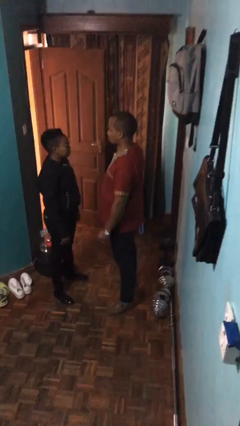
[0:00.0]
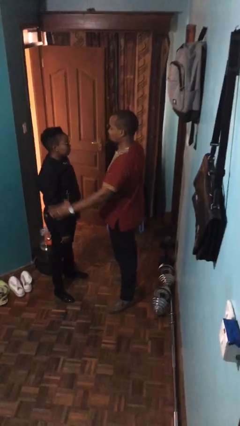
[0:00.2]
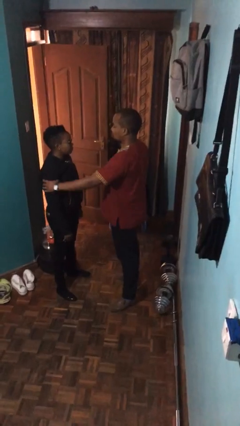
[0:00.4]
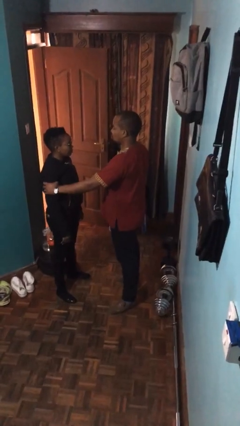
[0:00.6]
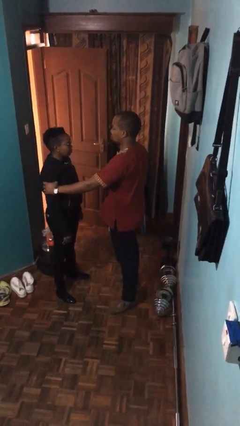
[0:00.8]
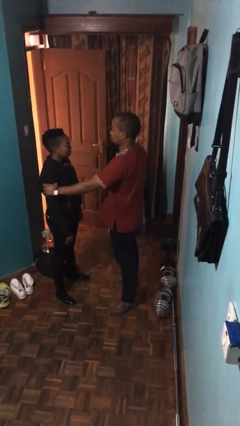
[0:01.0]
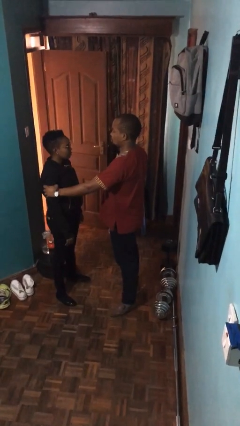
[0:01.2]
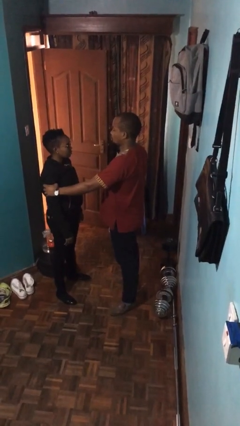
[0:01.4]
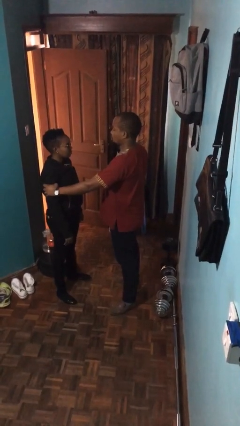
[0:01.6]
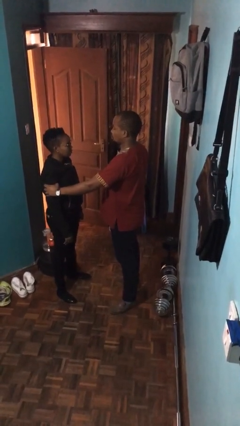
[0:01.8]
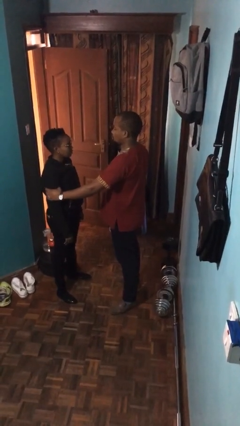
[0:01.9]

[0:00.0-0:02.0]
person grabs person by bicep

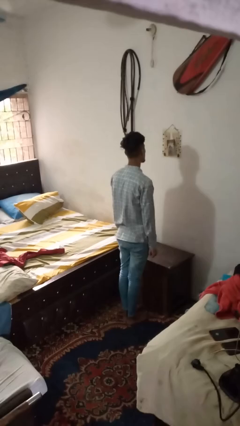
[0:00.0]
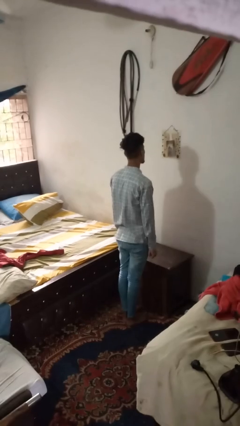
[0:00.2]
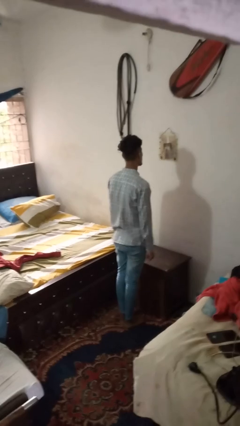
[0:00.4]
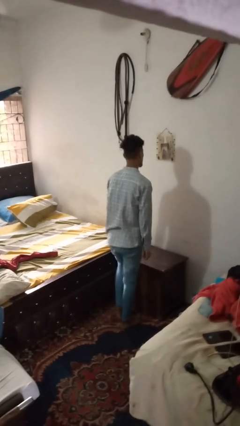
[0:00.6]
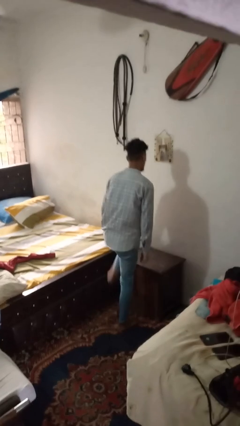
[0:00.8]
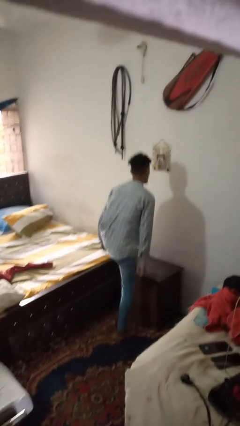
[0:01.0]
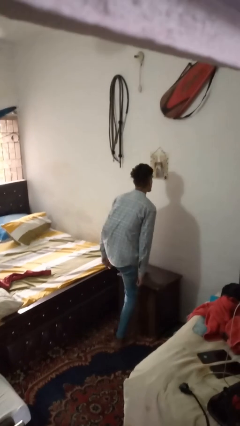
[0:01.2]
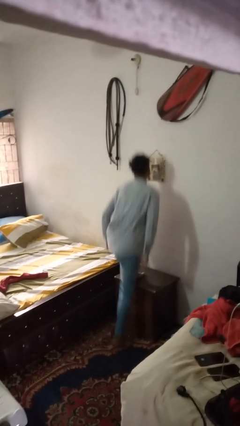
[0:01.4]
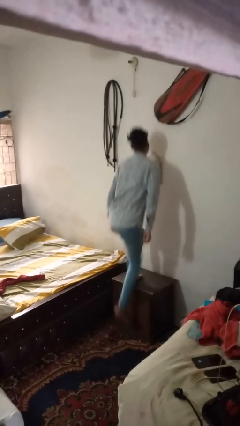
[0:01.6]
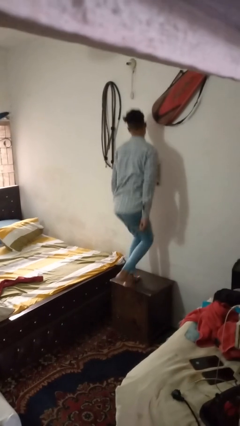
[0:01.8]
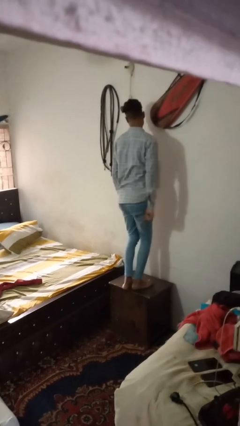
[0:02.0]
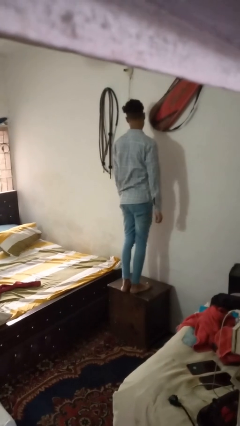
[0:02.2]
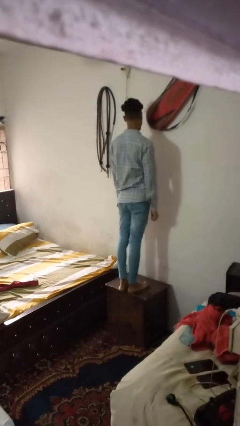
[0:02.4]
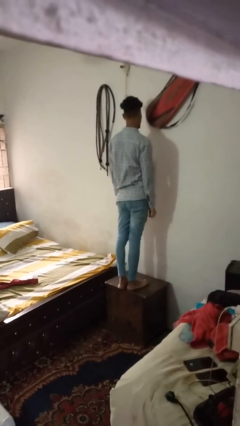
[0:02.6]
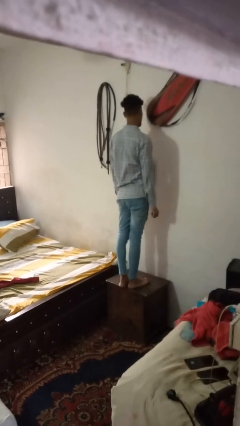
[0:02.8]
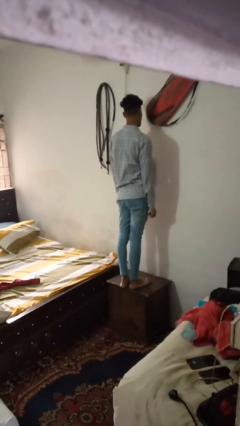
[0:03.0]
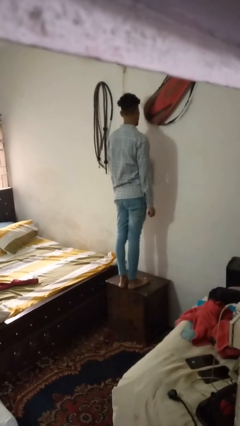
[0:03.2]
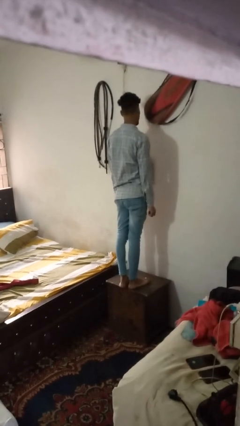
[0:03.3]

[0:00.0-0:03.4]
person climbs on table

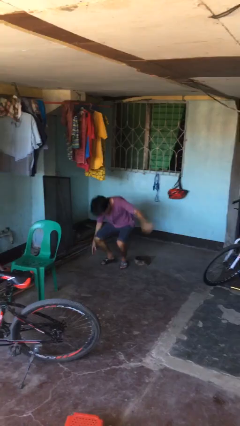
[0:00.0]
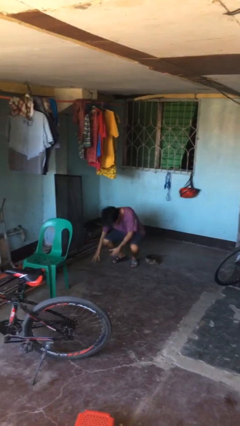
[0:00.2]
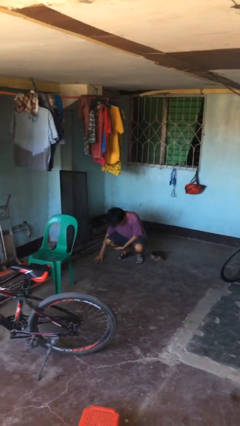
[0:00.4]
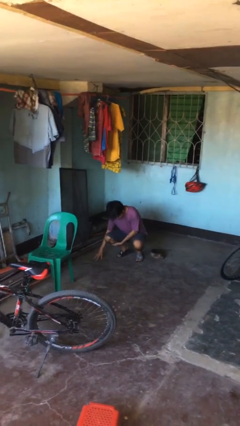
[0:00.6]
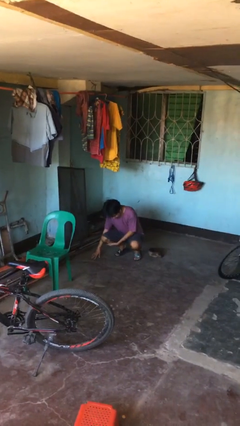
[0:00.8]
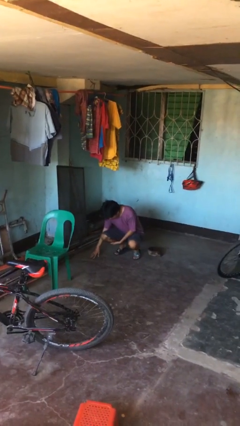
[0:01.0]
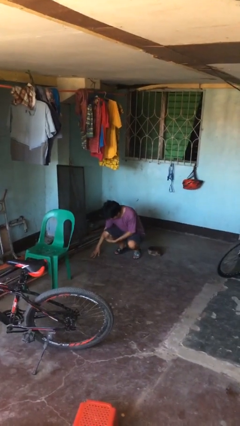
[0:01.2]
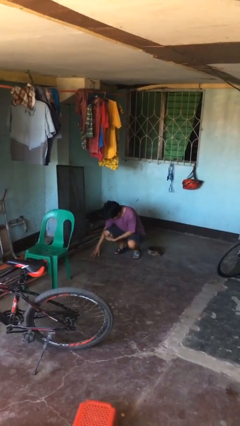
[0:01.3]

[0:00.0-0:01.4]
person lies down on floor

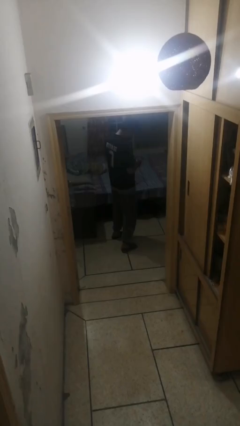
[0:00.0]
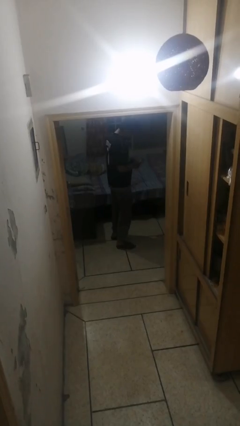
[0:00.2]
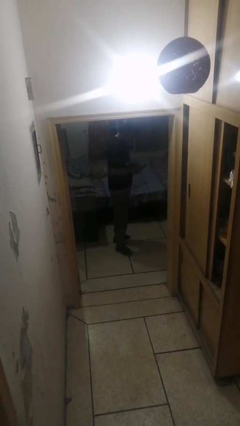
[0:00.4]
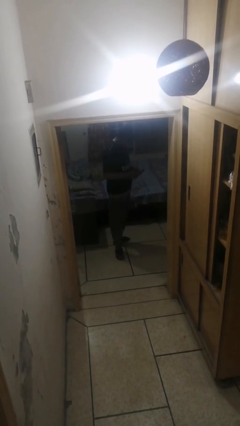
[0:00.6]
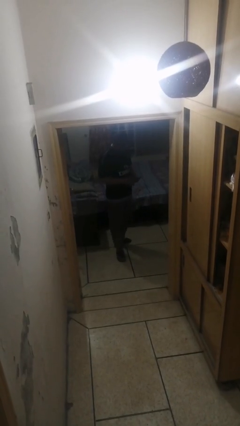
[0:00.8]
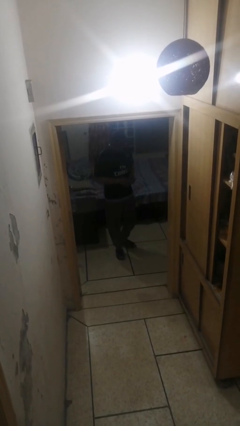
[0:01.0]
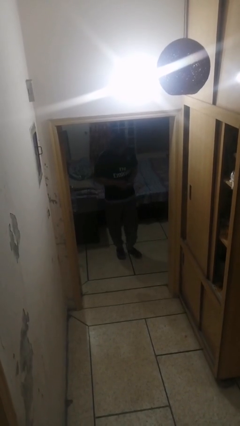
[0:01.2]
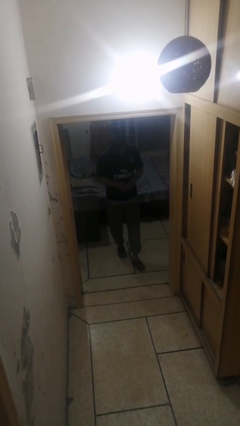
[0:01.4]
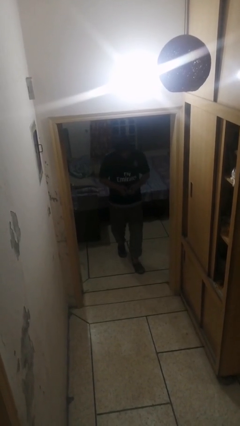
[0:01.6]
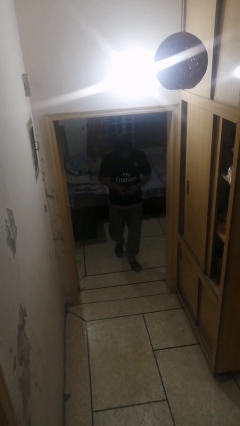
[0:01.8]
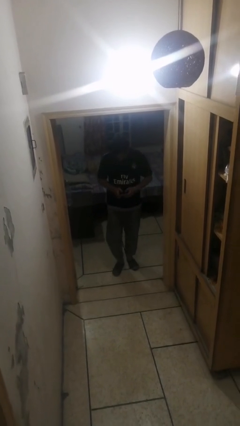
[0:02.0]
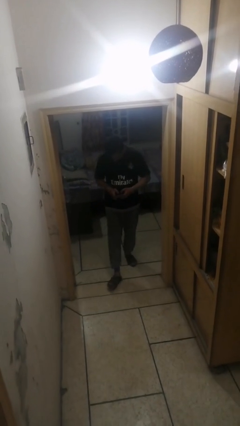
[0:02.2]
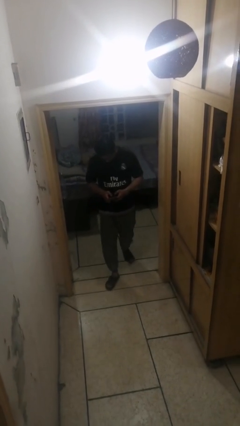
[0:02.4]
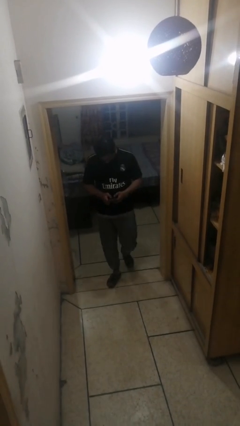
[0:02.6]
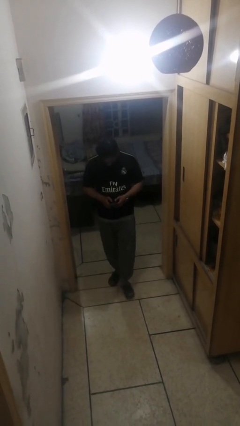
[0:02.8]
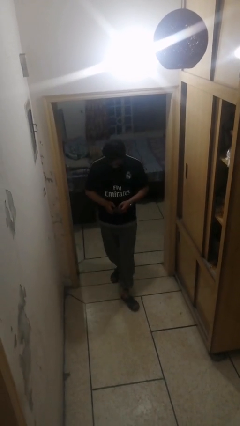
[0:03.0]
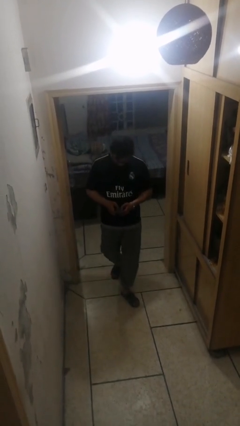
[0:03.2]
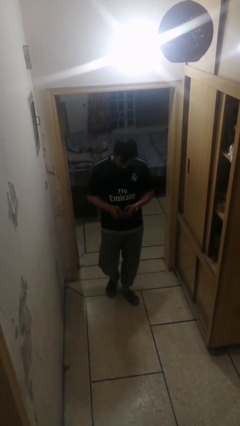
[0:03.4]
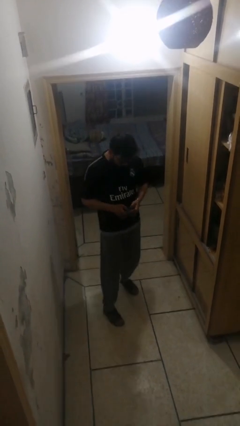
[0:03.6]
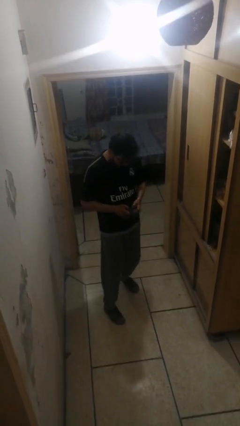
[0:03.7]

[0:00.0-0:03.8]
person enters scene through structure

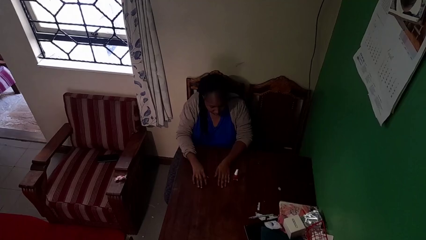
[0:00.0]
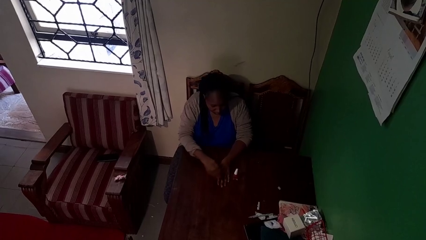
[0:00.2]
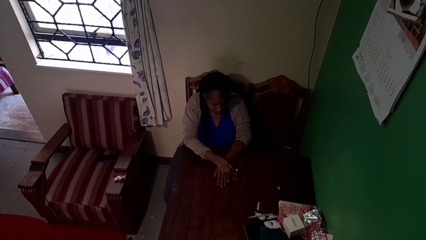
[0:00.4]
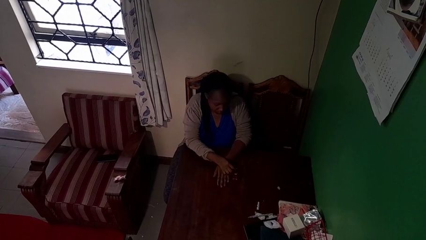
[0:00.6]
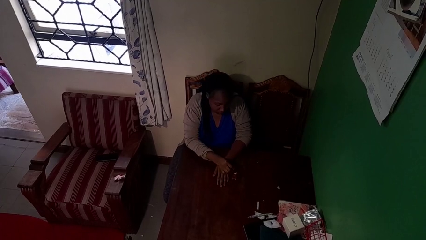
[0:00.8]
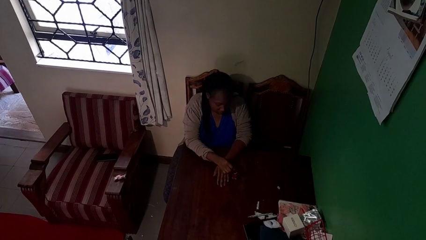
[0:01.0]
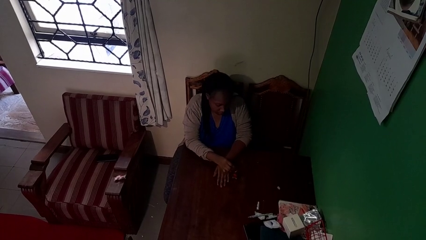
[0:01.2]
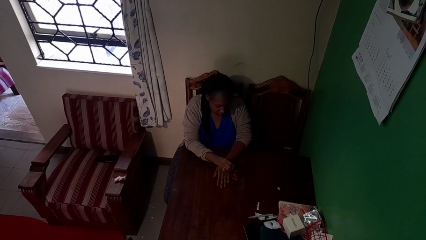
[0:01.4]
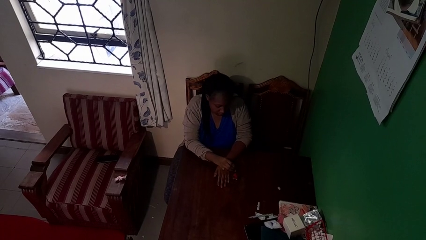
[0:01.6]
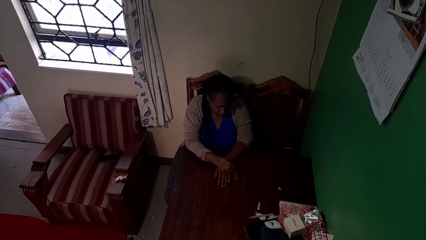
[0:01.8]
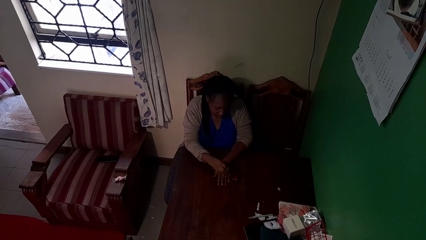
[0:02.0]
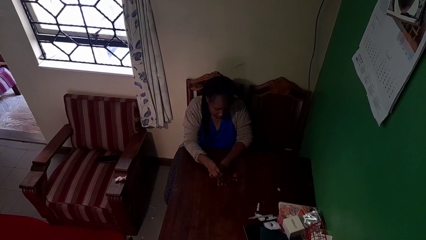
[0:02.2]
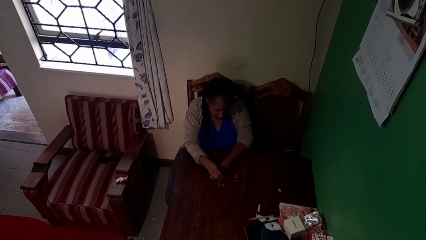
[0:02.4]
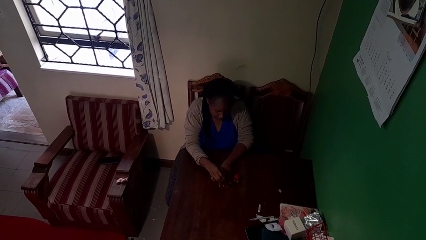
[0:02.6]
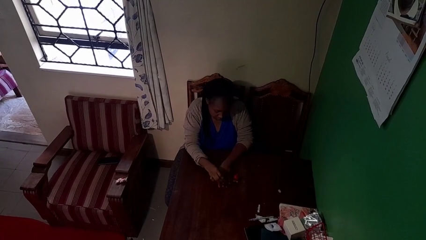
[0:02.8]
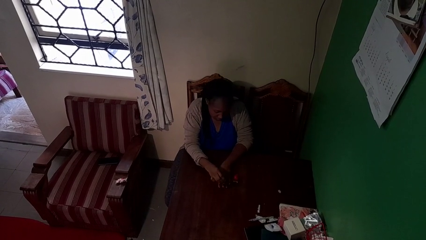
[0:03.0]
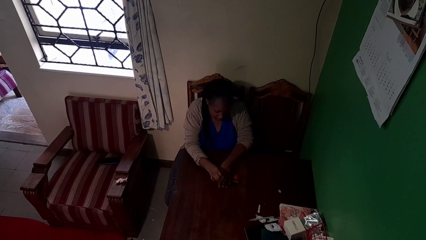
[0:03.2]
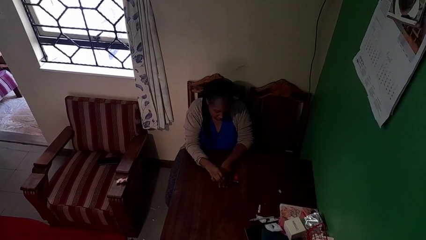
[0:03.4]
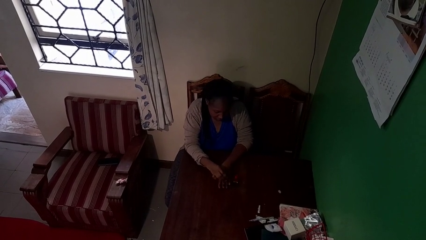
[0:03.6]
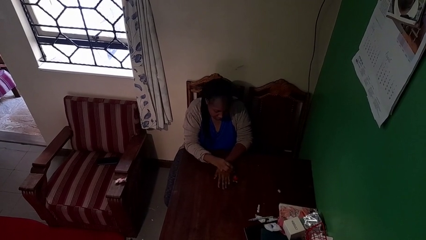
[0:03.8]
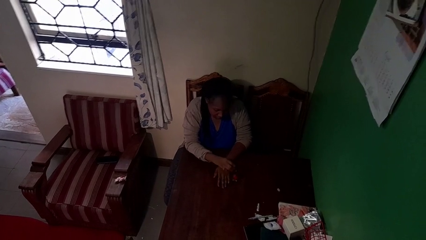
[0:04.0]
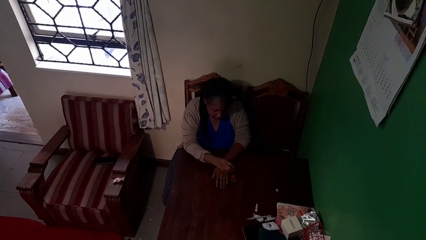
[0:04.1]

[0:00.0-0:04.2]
person paints fingernails

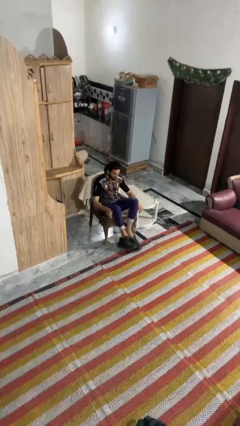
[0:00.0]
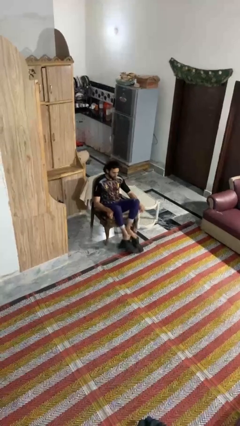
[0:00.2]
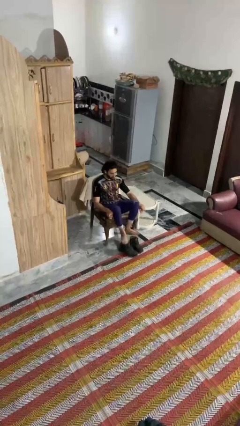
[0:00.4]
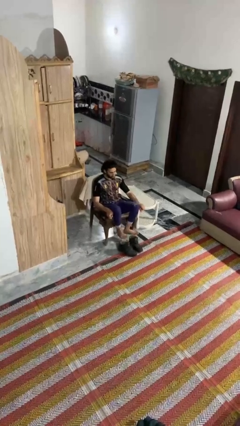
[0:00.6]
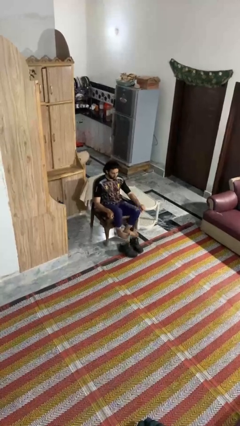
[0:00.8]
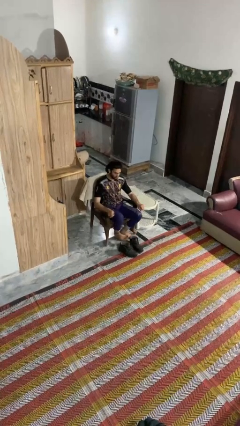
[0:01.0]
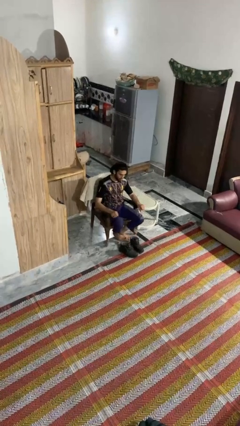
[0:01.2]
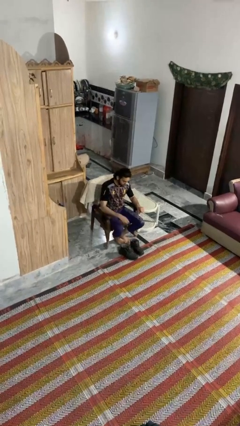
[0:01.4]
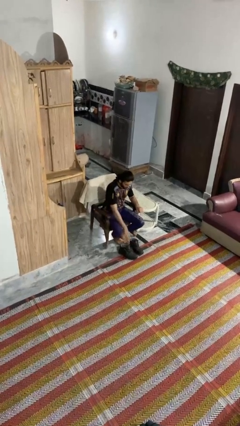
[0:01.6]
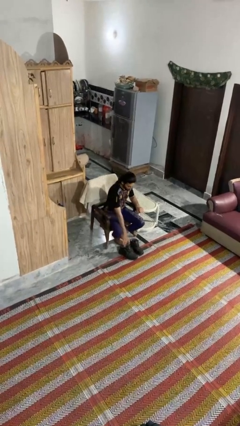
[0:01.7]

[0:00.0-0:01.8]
person takes off boots

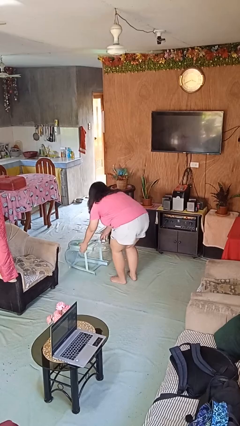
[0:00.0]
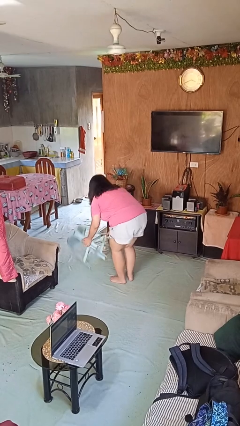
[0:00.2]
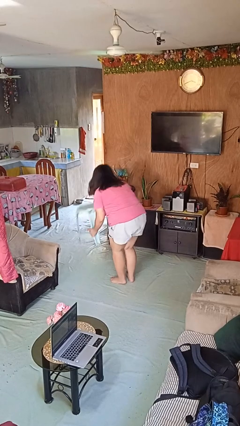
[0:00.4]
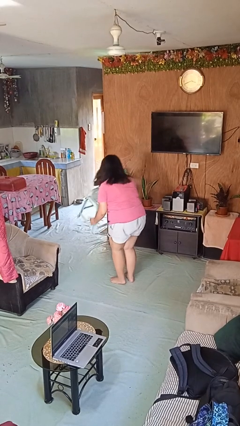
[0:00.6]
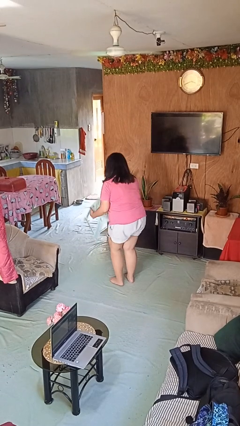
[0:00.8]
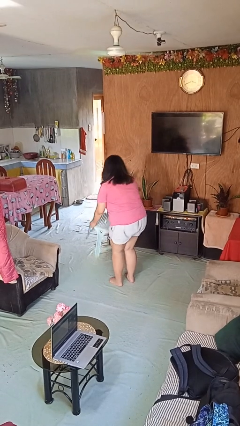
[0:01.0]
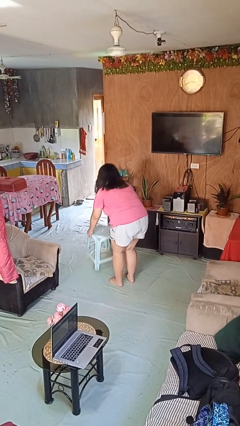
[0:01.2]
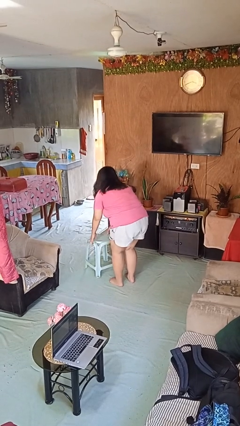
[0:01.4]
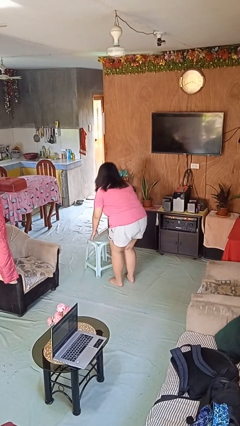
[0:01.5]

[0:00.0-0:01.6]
person sets upright furniture
